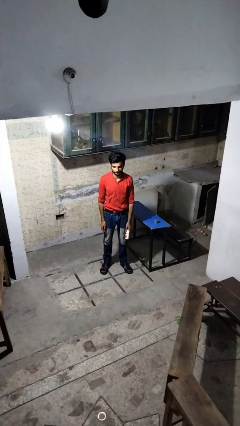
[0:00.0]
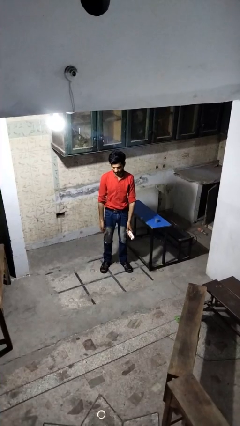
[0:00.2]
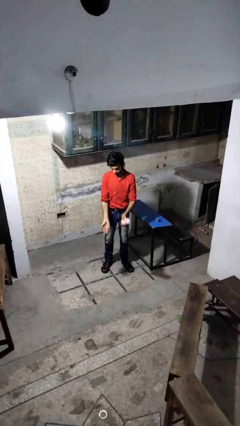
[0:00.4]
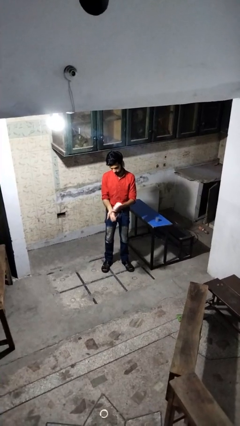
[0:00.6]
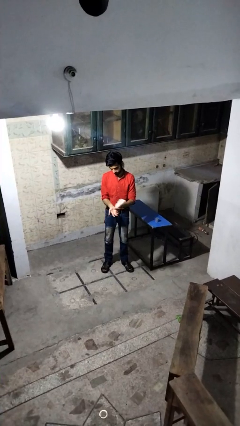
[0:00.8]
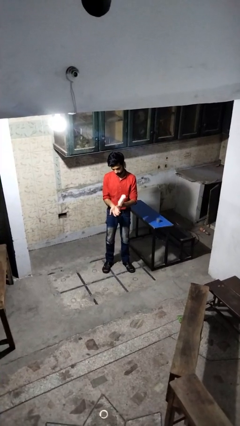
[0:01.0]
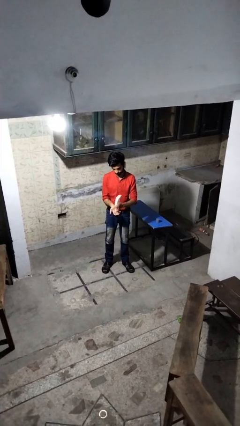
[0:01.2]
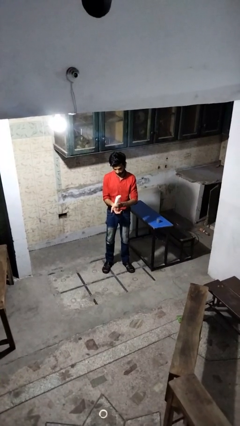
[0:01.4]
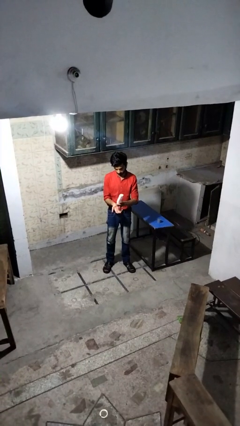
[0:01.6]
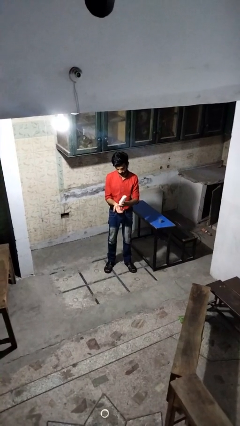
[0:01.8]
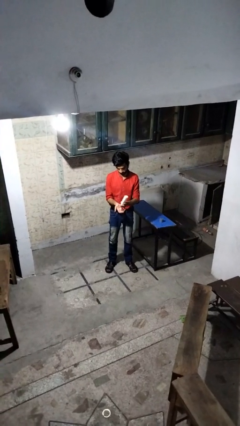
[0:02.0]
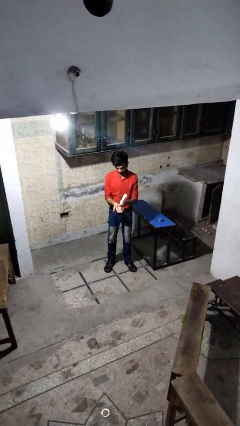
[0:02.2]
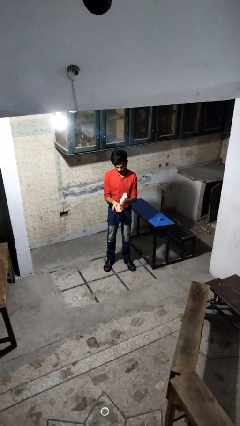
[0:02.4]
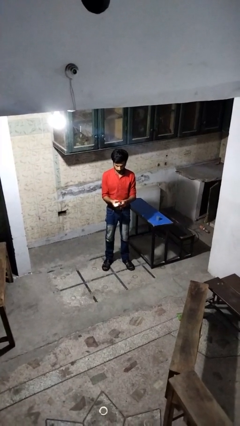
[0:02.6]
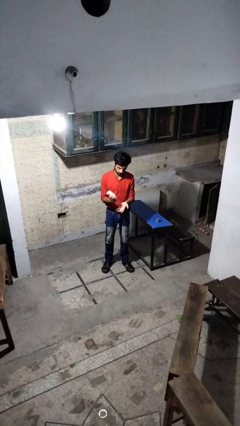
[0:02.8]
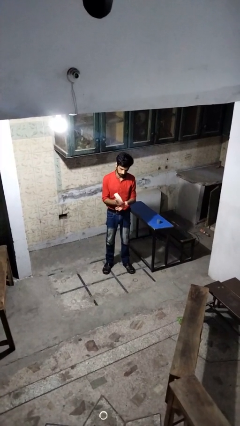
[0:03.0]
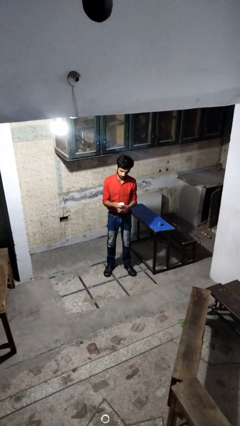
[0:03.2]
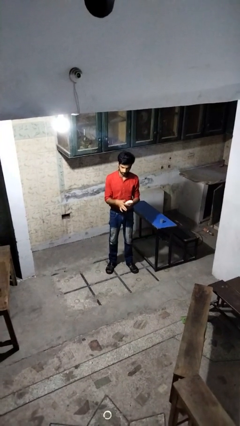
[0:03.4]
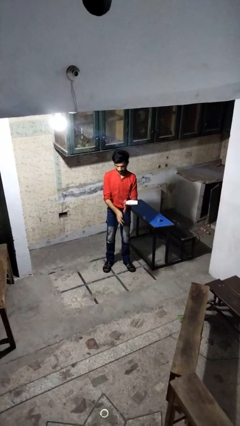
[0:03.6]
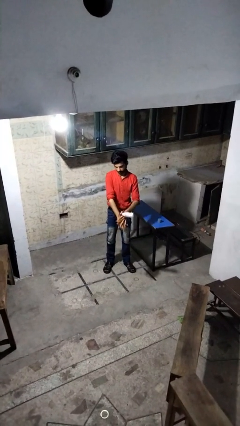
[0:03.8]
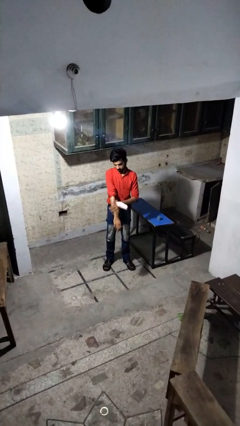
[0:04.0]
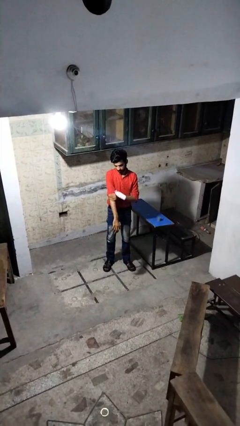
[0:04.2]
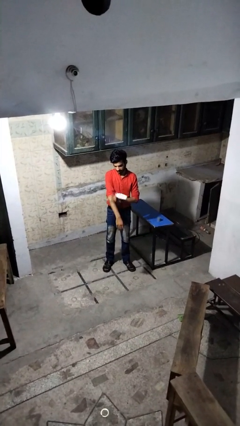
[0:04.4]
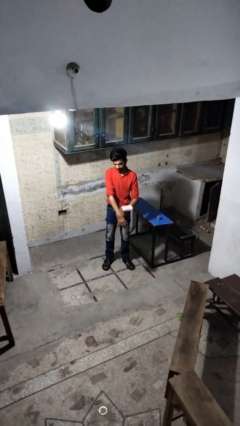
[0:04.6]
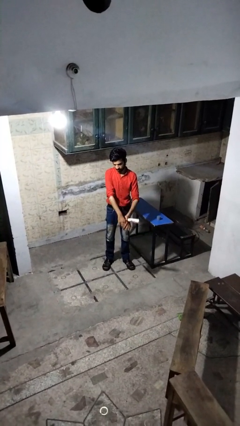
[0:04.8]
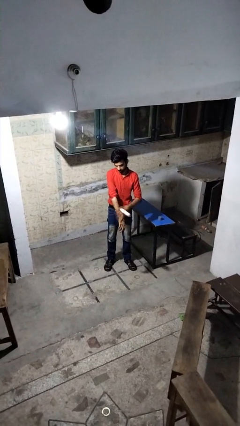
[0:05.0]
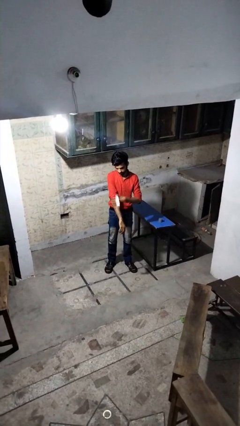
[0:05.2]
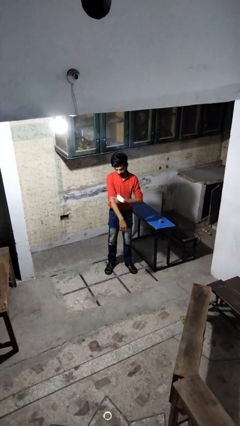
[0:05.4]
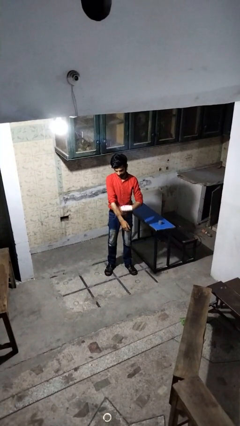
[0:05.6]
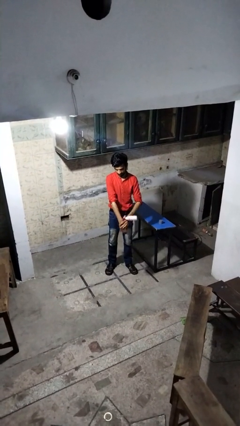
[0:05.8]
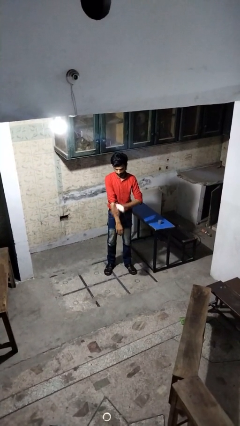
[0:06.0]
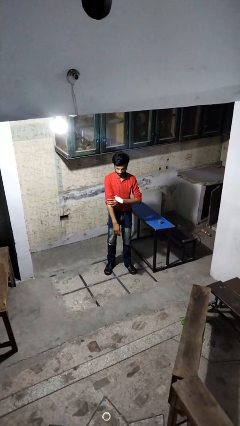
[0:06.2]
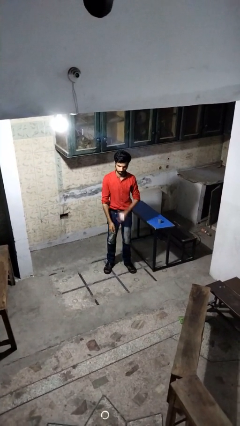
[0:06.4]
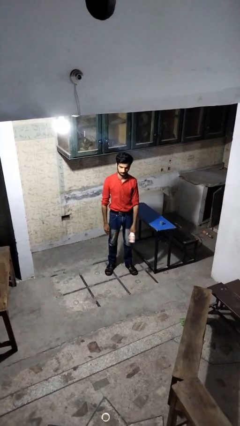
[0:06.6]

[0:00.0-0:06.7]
person applies sunscreen

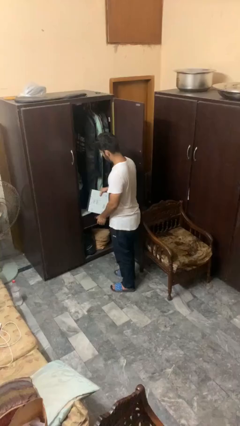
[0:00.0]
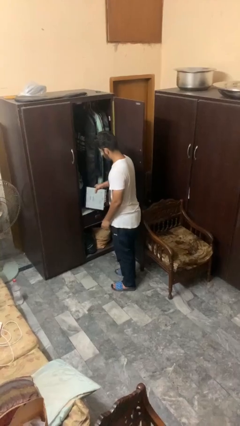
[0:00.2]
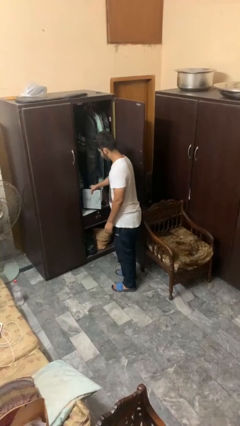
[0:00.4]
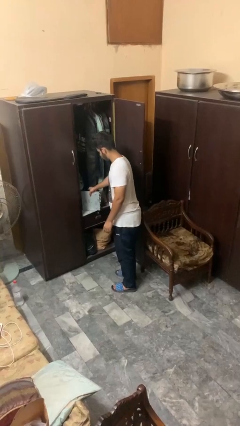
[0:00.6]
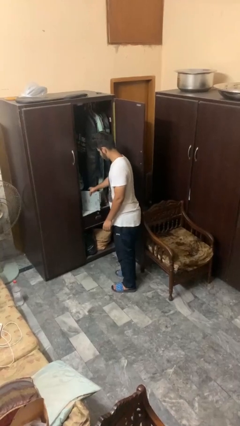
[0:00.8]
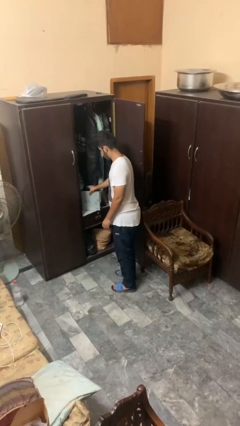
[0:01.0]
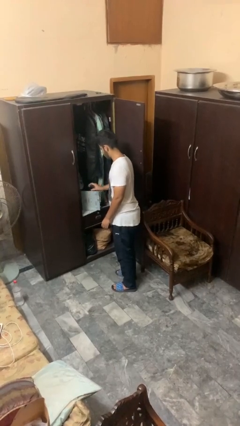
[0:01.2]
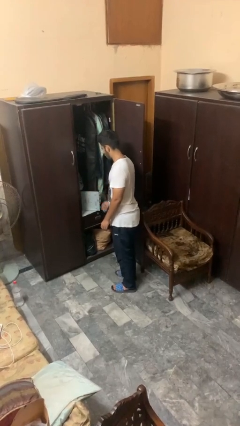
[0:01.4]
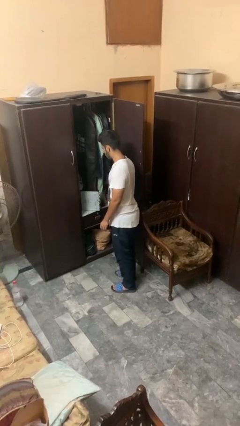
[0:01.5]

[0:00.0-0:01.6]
person puts down object on countertop

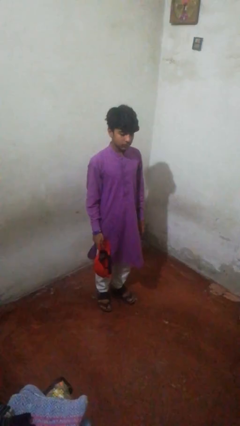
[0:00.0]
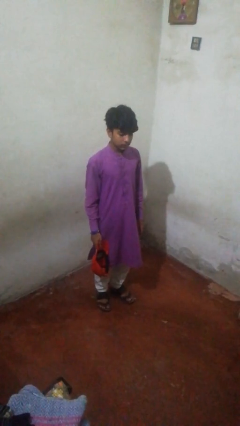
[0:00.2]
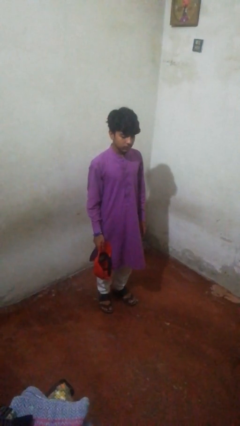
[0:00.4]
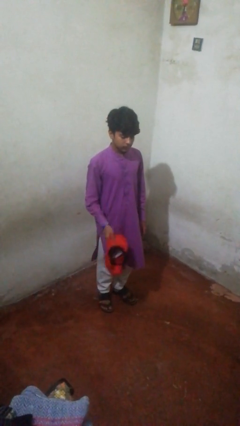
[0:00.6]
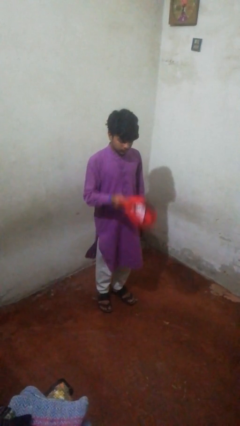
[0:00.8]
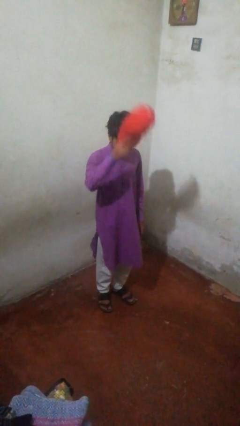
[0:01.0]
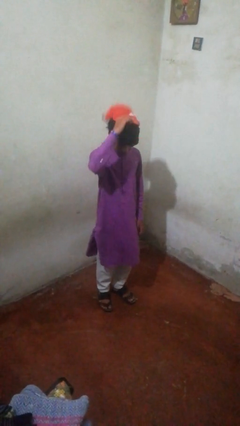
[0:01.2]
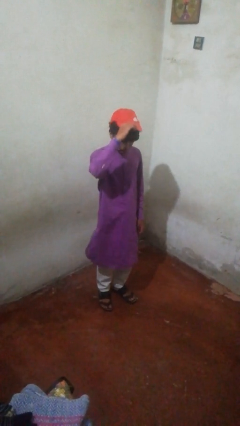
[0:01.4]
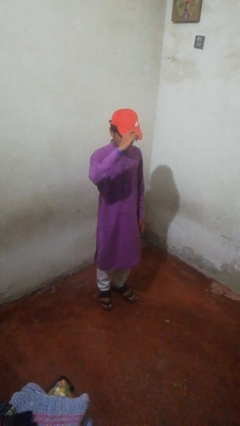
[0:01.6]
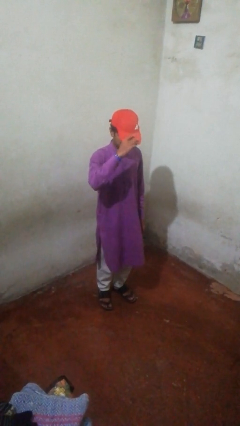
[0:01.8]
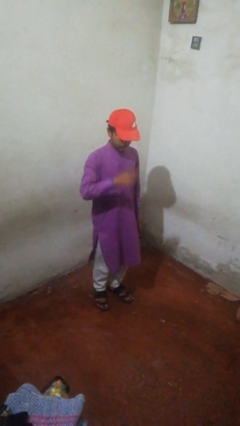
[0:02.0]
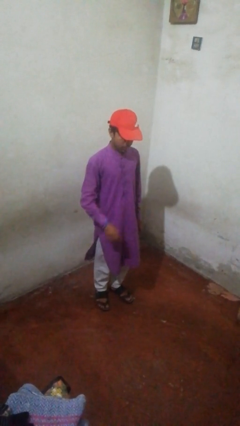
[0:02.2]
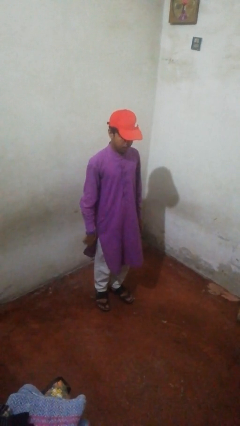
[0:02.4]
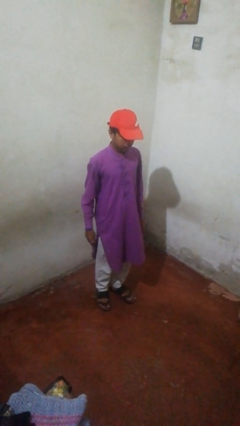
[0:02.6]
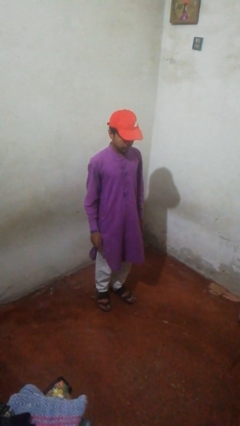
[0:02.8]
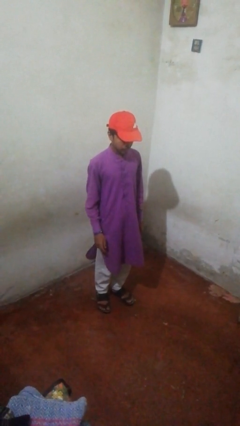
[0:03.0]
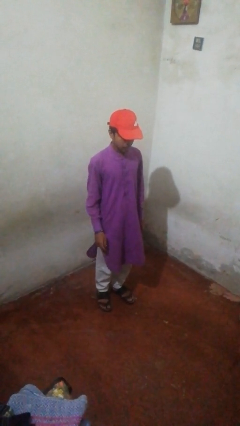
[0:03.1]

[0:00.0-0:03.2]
person opens sliding door

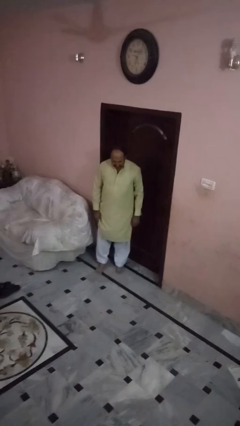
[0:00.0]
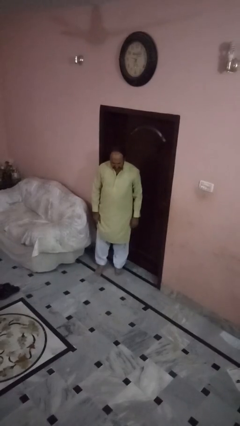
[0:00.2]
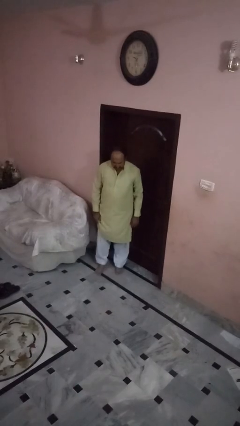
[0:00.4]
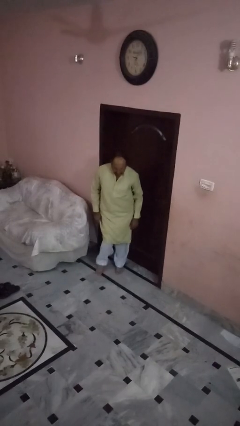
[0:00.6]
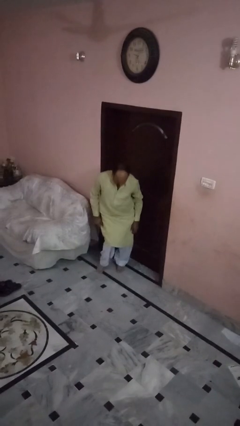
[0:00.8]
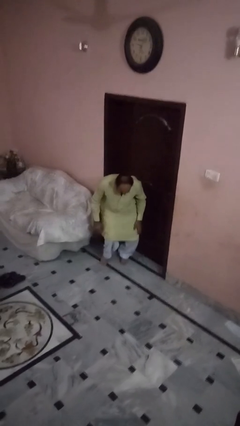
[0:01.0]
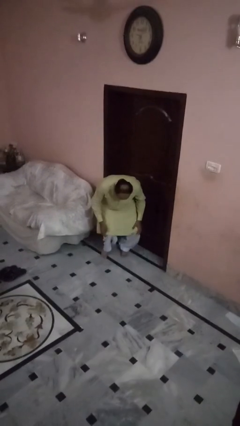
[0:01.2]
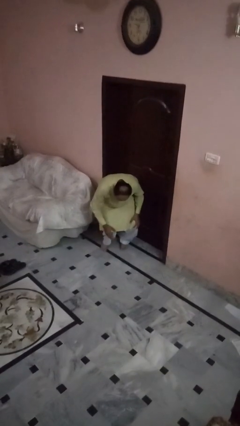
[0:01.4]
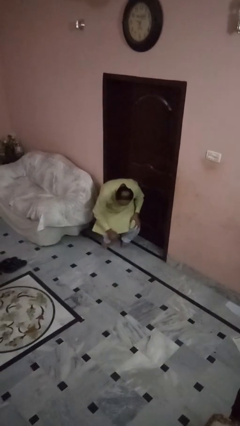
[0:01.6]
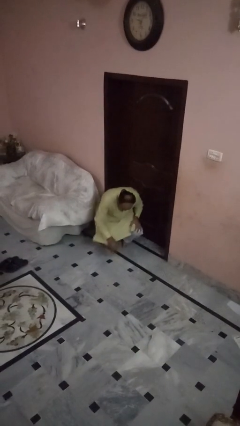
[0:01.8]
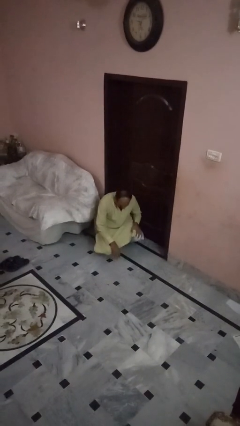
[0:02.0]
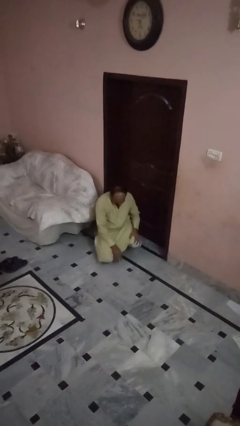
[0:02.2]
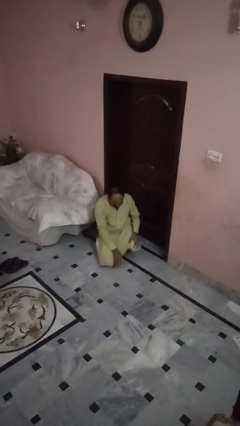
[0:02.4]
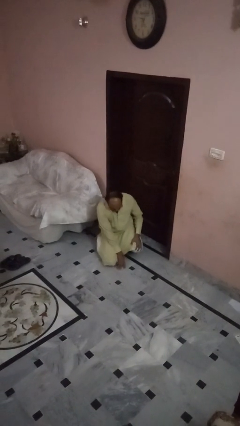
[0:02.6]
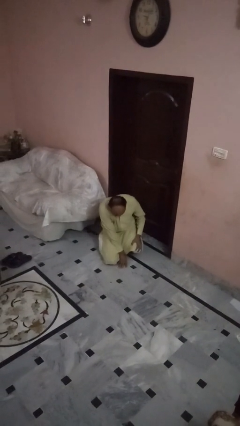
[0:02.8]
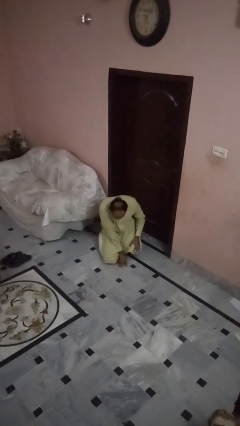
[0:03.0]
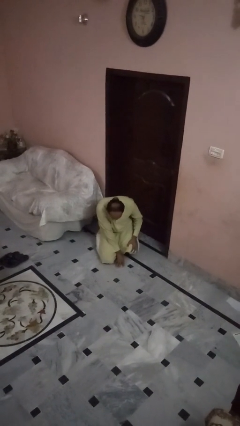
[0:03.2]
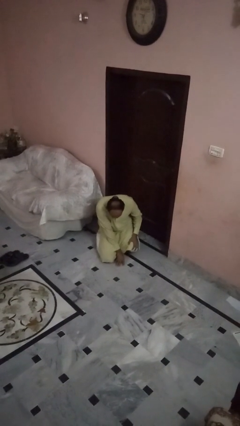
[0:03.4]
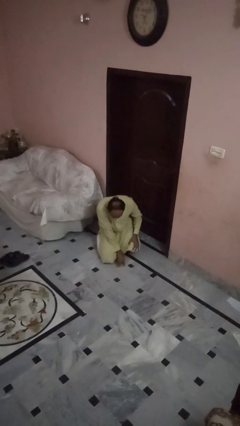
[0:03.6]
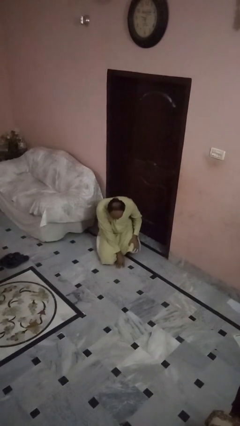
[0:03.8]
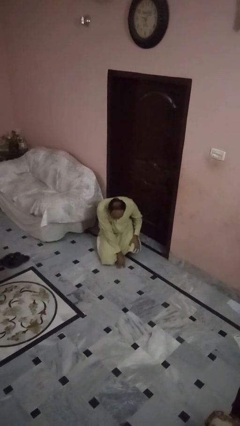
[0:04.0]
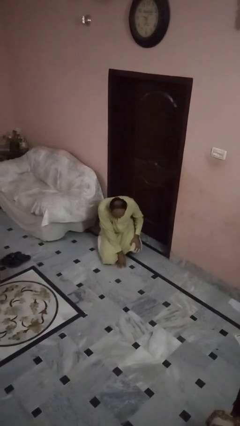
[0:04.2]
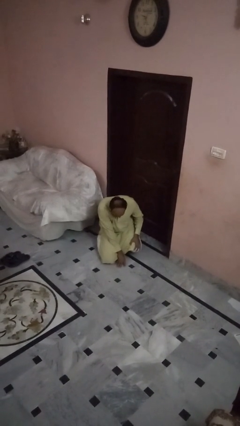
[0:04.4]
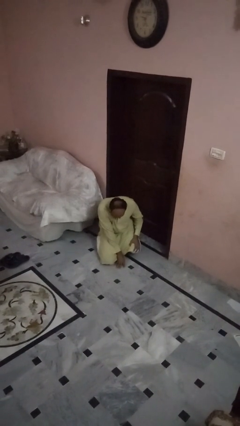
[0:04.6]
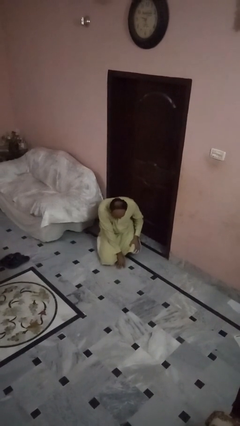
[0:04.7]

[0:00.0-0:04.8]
person falls while standing

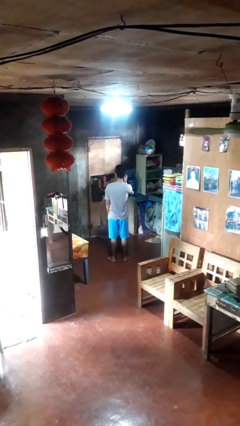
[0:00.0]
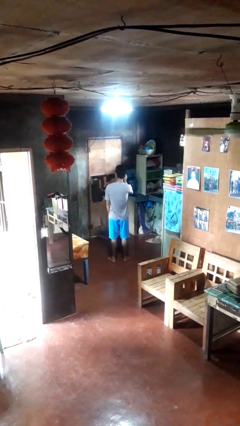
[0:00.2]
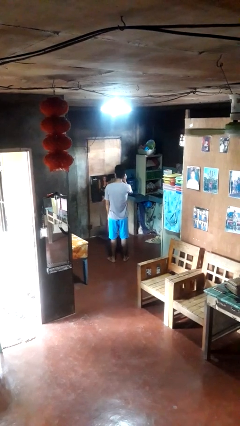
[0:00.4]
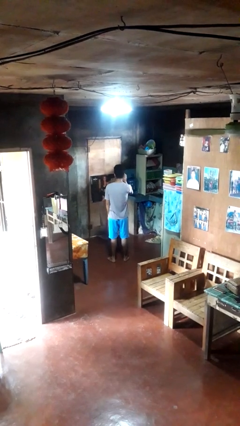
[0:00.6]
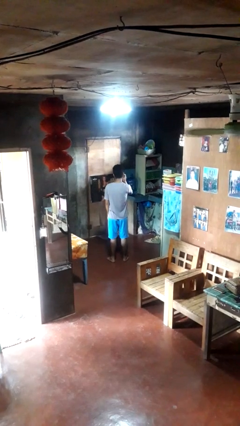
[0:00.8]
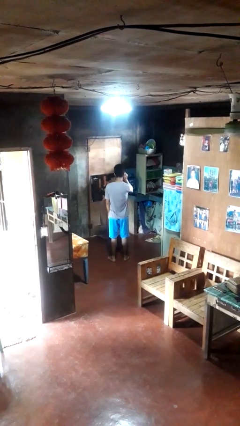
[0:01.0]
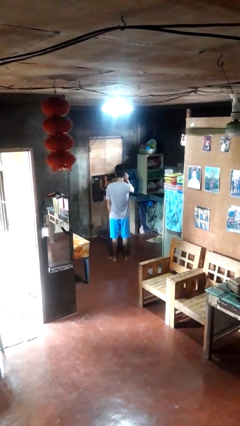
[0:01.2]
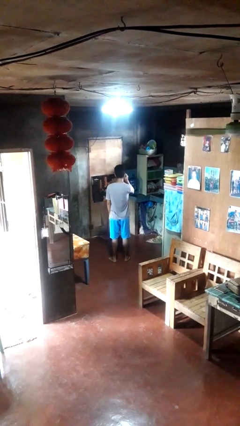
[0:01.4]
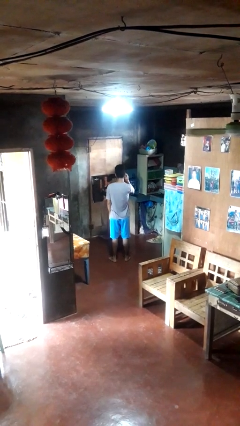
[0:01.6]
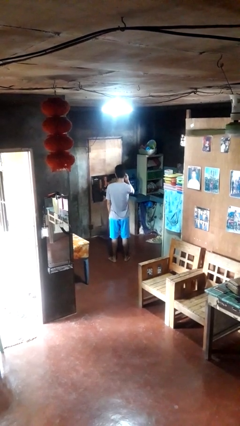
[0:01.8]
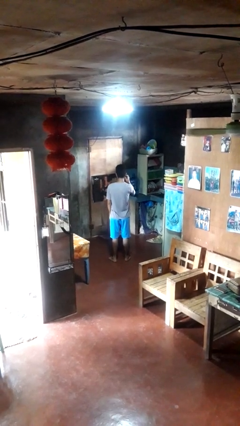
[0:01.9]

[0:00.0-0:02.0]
person touches earlobe
